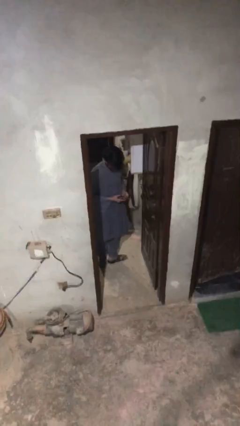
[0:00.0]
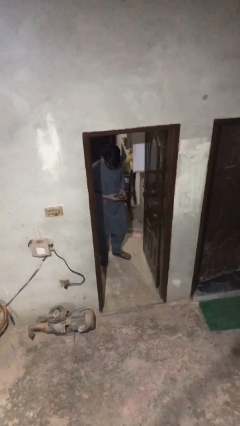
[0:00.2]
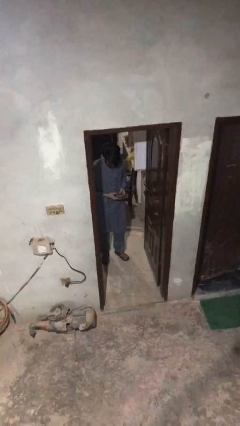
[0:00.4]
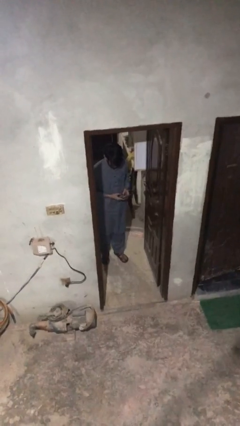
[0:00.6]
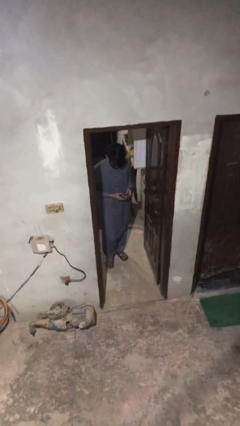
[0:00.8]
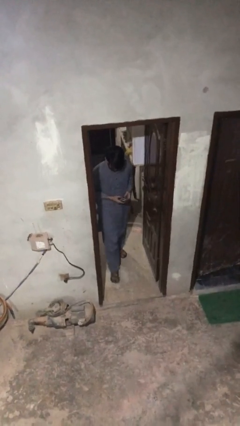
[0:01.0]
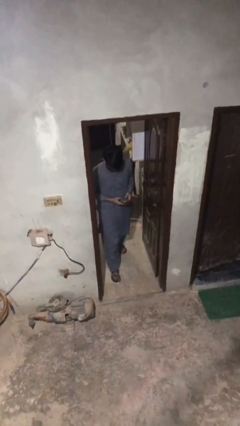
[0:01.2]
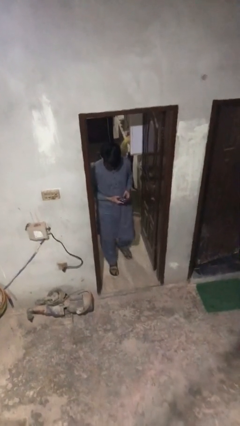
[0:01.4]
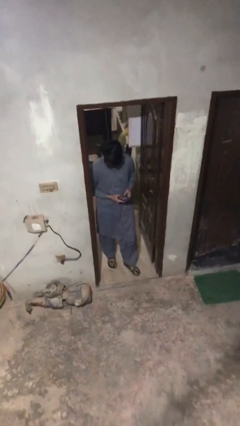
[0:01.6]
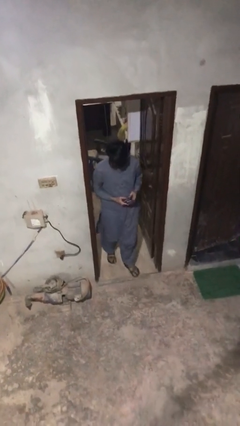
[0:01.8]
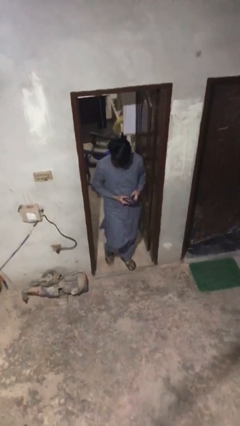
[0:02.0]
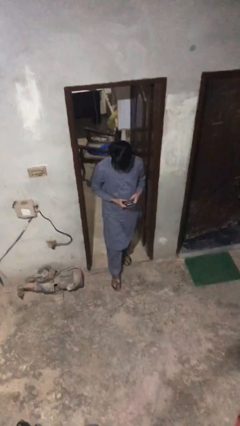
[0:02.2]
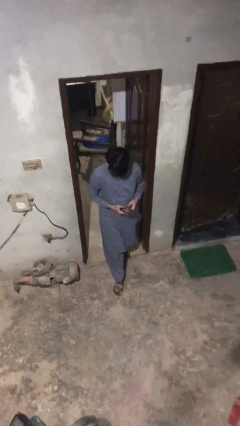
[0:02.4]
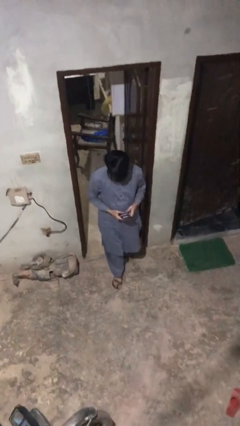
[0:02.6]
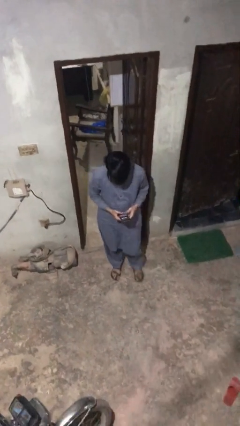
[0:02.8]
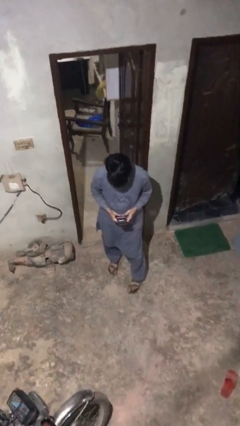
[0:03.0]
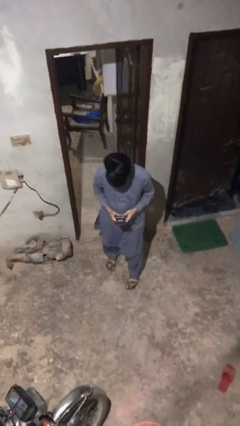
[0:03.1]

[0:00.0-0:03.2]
person exits scene through structure

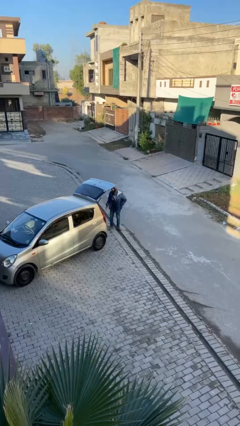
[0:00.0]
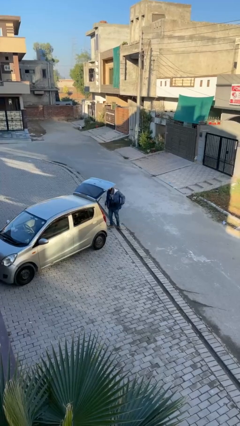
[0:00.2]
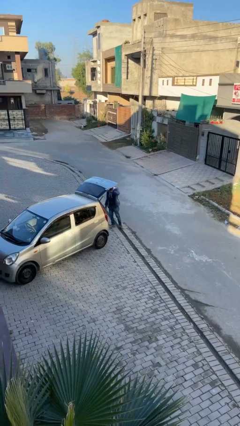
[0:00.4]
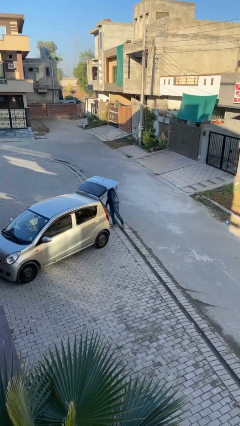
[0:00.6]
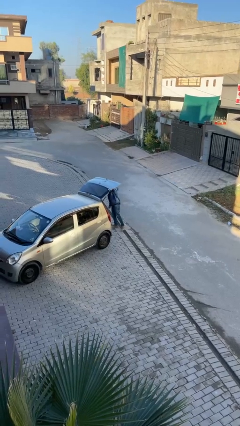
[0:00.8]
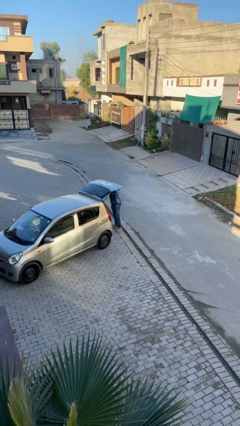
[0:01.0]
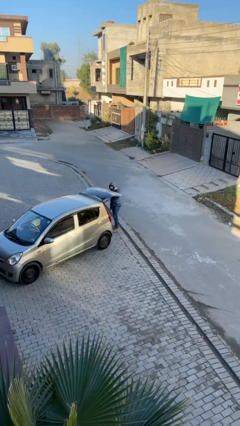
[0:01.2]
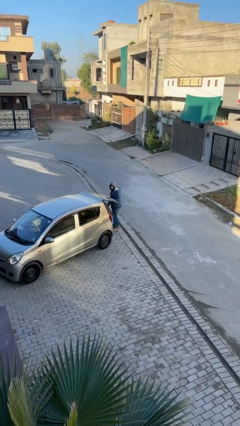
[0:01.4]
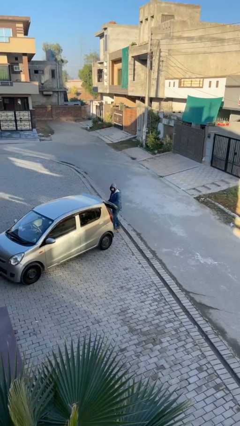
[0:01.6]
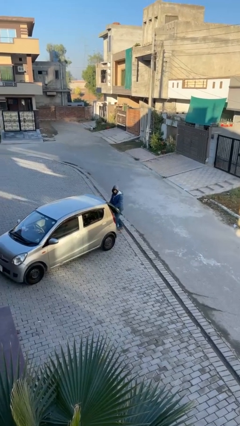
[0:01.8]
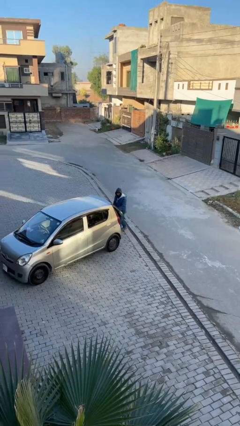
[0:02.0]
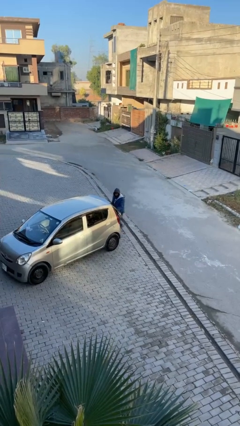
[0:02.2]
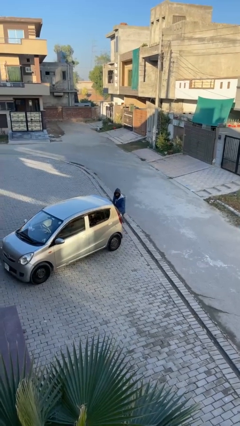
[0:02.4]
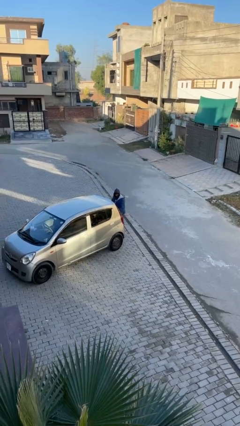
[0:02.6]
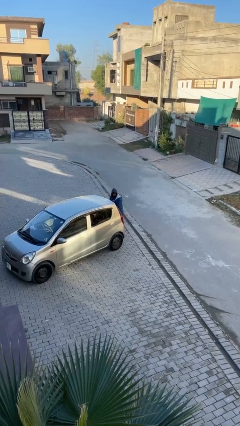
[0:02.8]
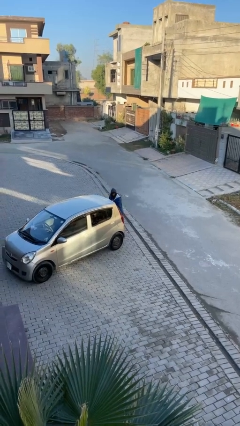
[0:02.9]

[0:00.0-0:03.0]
person closes car trunk

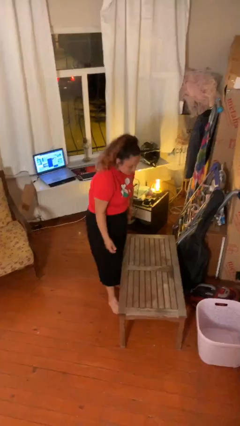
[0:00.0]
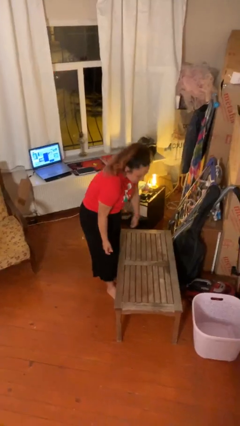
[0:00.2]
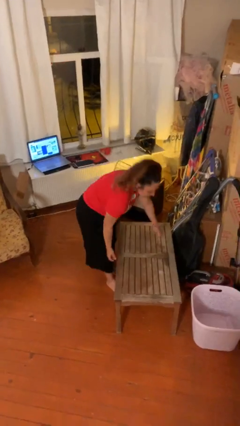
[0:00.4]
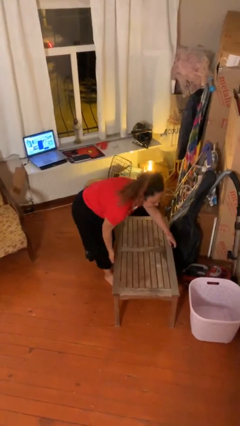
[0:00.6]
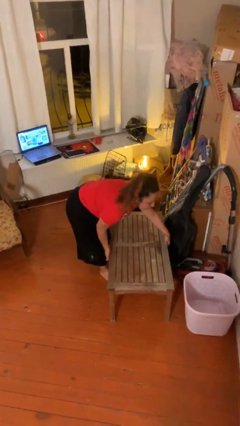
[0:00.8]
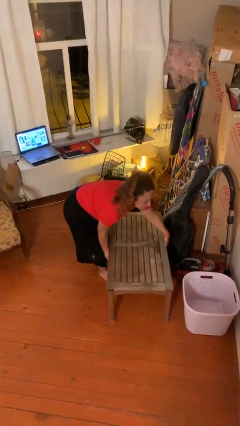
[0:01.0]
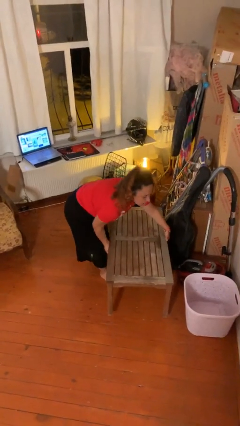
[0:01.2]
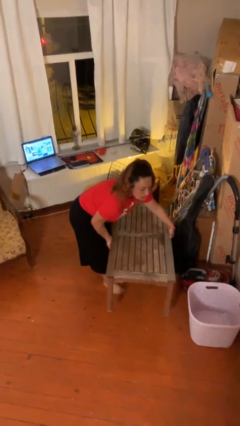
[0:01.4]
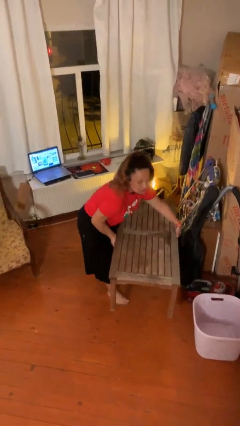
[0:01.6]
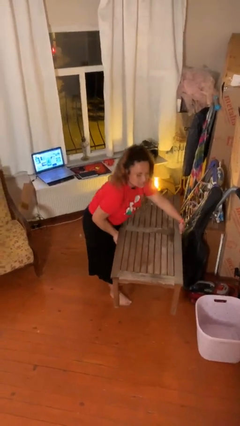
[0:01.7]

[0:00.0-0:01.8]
person picks up object from floor

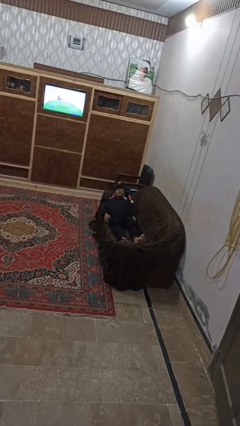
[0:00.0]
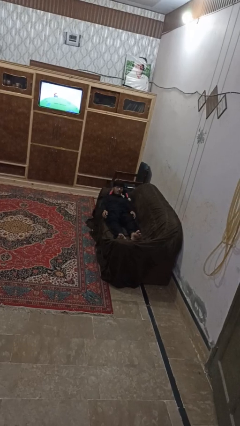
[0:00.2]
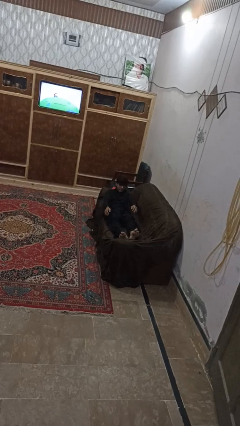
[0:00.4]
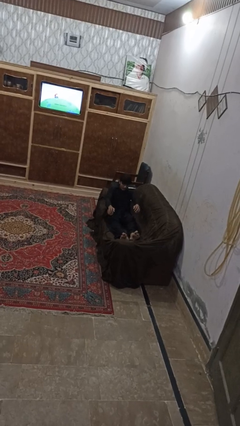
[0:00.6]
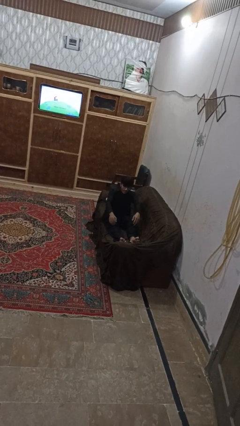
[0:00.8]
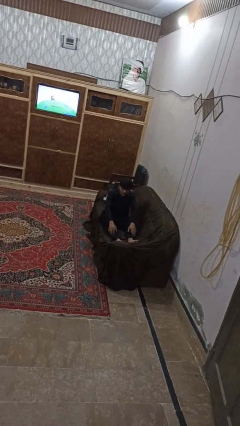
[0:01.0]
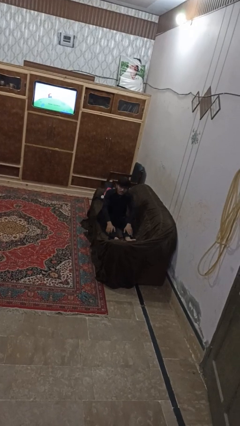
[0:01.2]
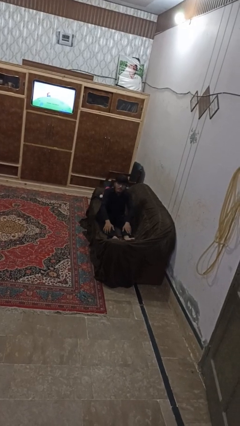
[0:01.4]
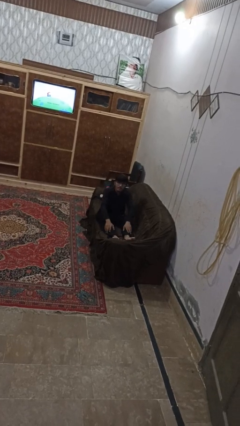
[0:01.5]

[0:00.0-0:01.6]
person stands up

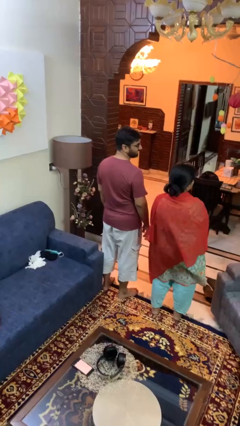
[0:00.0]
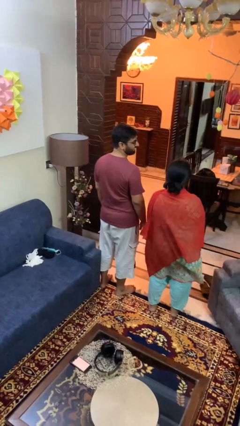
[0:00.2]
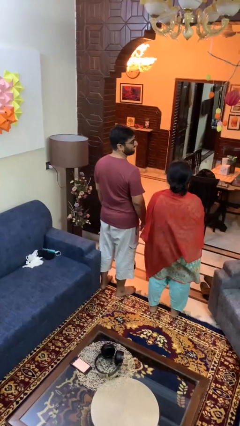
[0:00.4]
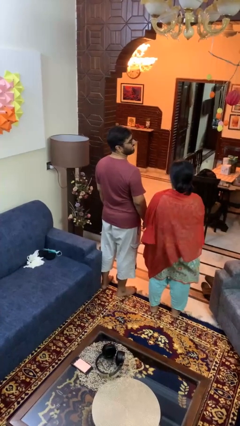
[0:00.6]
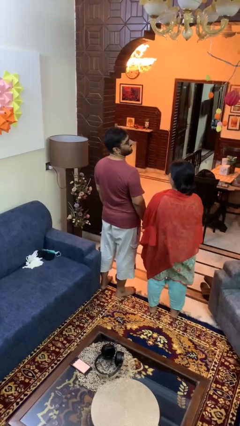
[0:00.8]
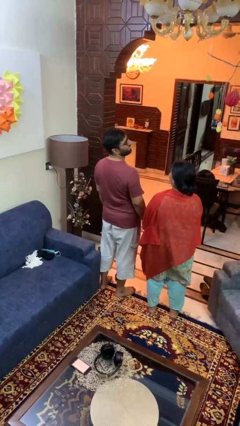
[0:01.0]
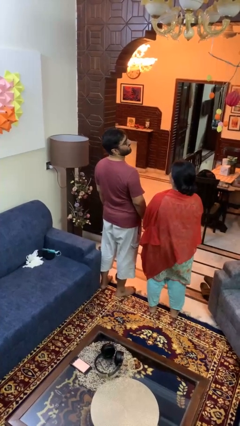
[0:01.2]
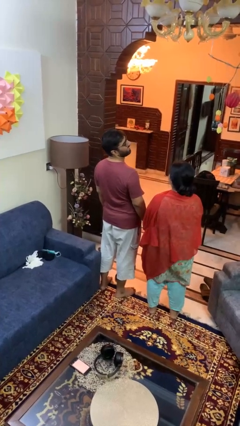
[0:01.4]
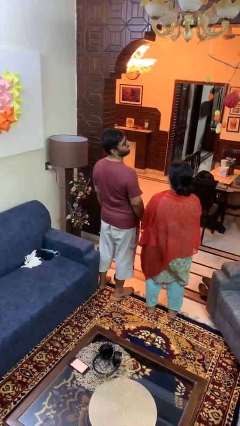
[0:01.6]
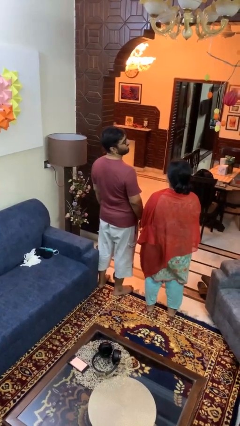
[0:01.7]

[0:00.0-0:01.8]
person laughs with person

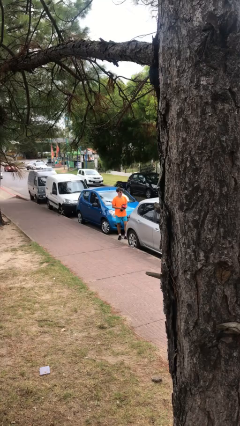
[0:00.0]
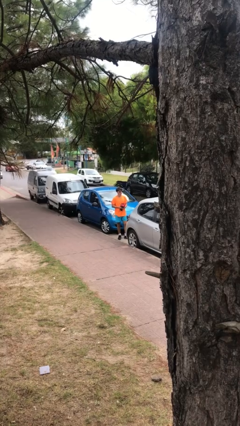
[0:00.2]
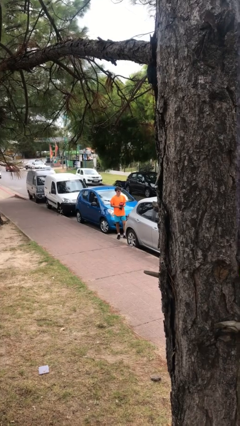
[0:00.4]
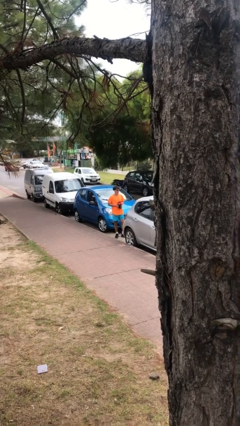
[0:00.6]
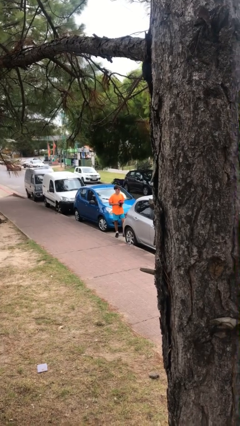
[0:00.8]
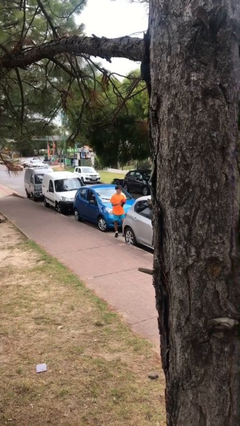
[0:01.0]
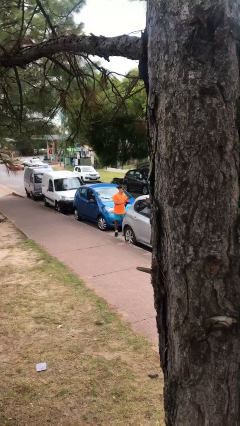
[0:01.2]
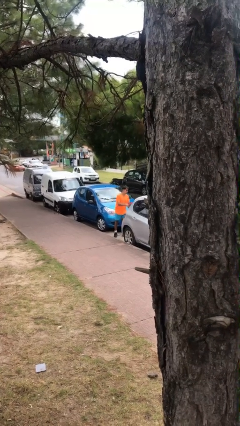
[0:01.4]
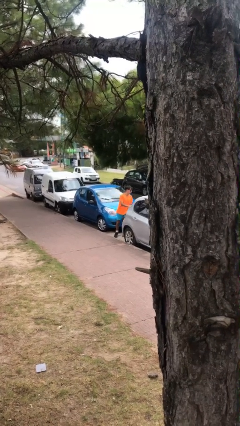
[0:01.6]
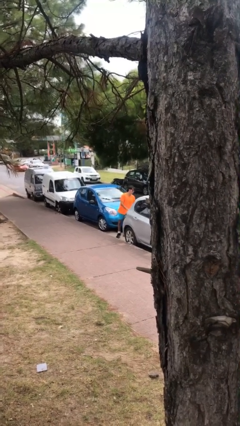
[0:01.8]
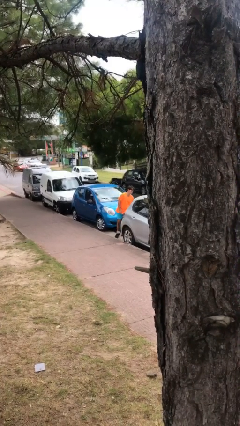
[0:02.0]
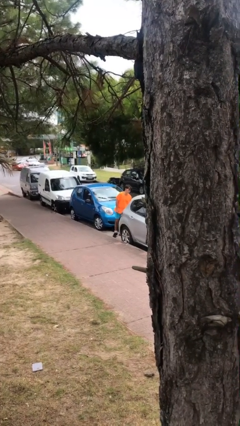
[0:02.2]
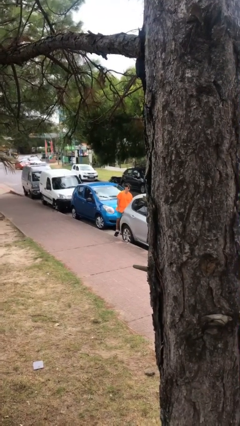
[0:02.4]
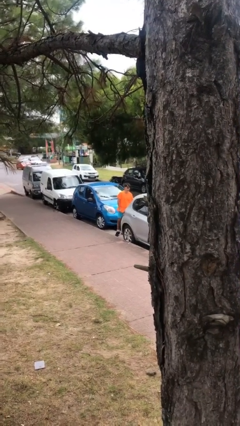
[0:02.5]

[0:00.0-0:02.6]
person loads car

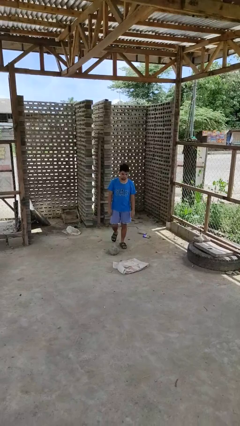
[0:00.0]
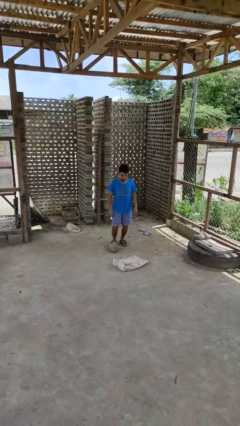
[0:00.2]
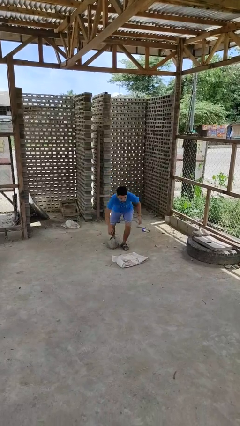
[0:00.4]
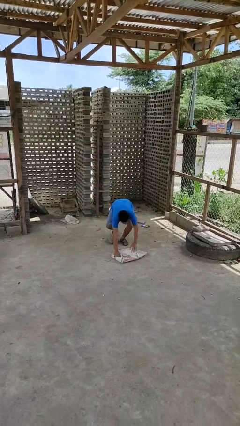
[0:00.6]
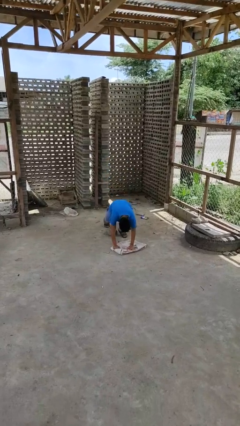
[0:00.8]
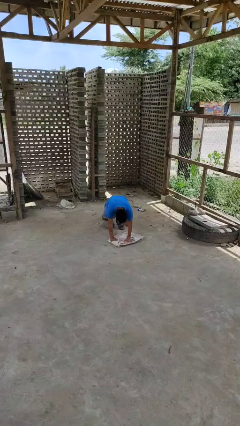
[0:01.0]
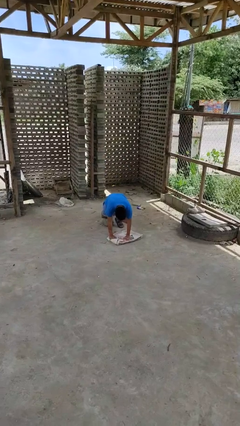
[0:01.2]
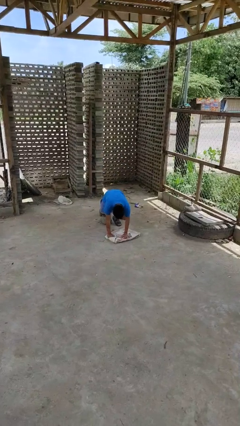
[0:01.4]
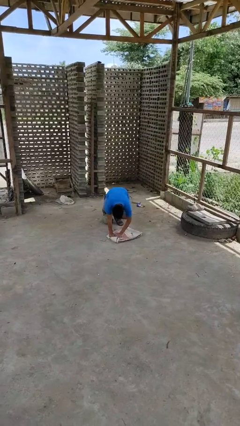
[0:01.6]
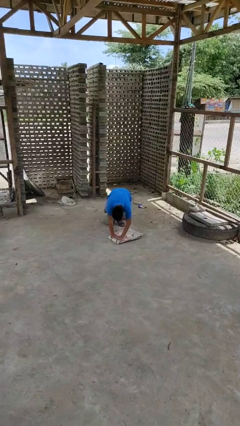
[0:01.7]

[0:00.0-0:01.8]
person trips on object on floor

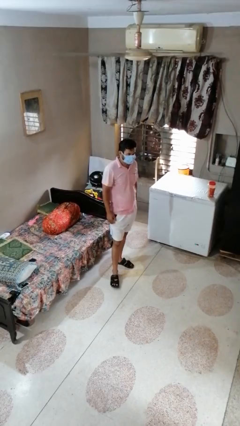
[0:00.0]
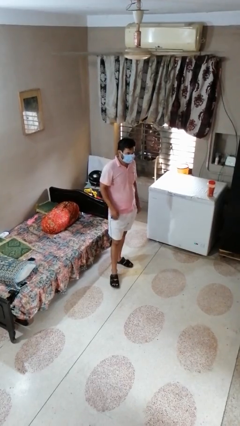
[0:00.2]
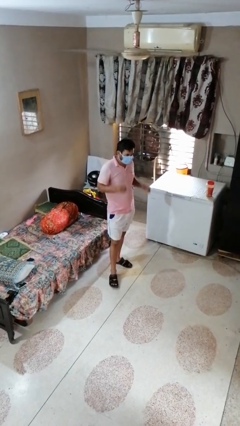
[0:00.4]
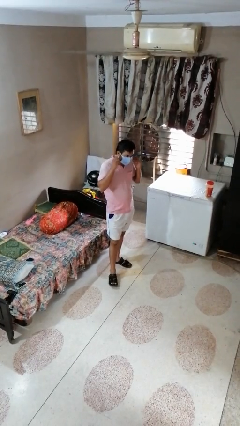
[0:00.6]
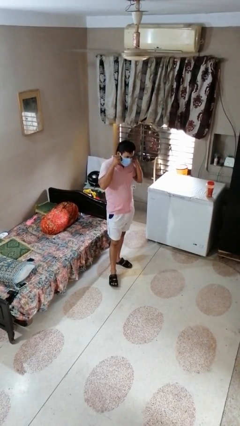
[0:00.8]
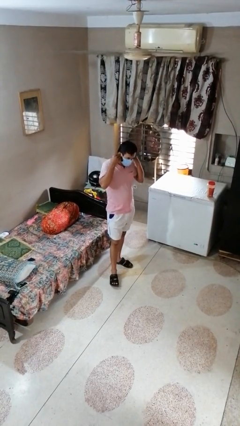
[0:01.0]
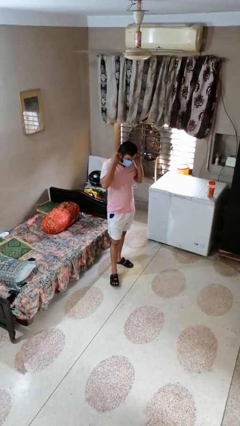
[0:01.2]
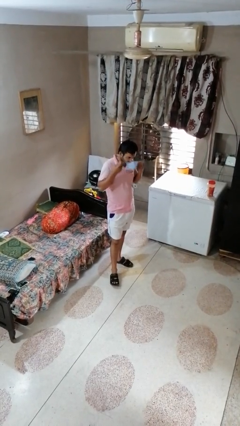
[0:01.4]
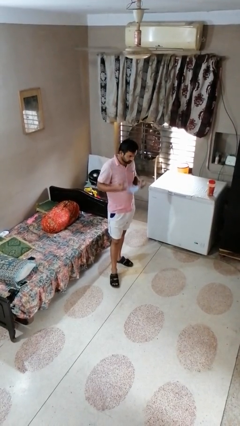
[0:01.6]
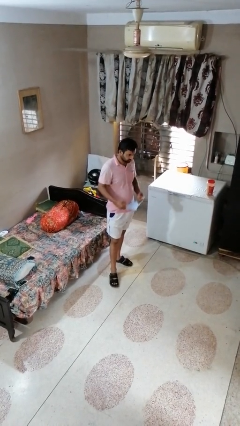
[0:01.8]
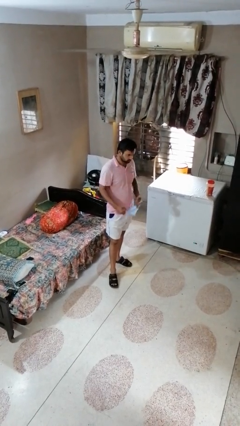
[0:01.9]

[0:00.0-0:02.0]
person takes off facemask
